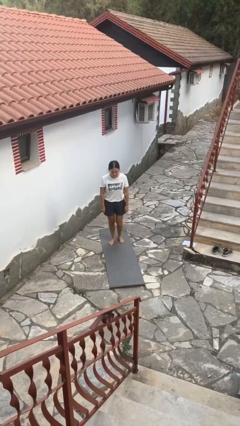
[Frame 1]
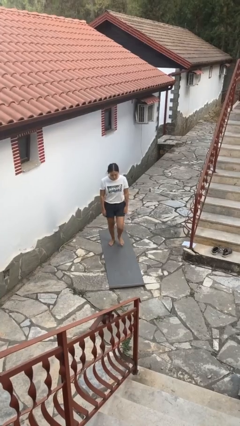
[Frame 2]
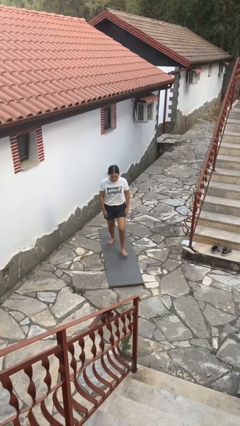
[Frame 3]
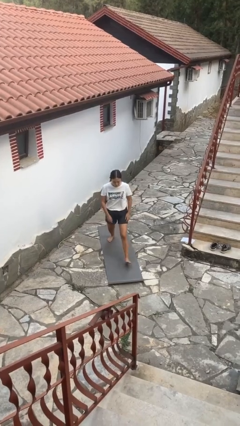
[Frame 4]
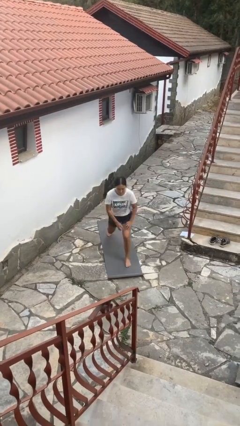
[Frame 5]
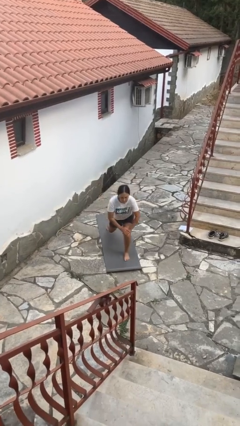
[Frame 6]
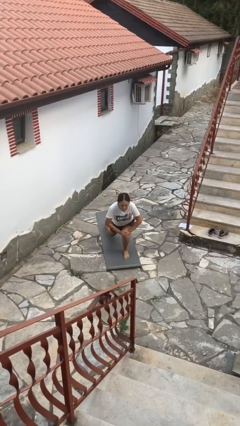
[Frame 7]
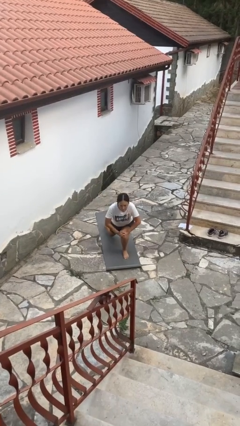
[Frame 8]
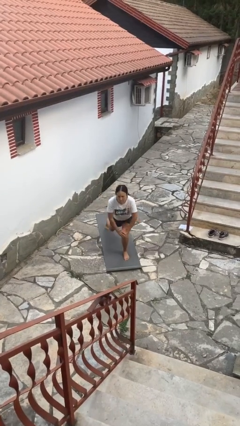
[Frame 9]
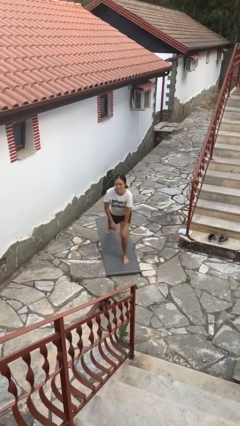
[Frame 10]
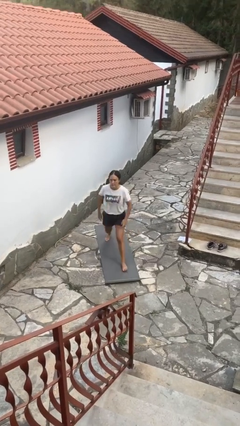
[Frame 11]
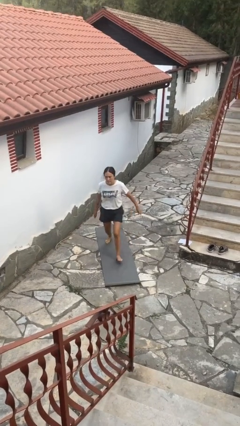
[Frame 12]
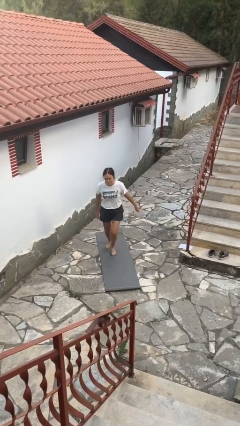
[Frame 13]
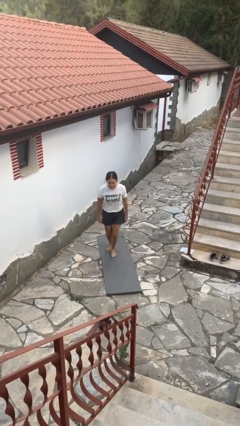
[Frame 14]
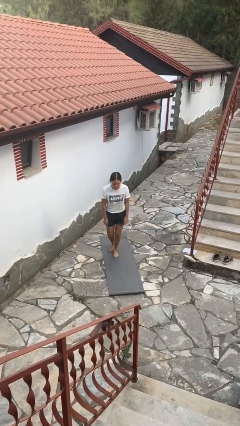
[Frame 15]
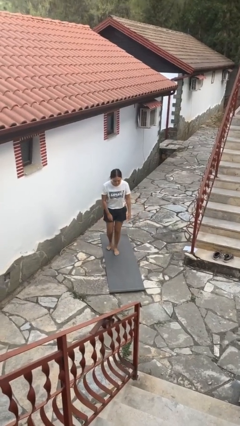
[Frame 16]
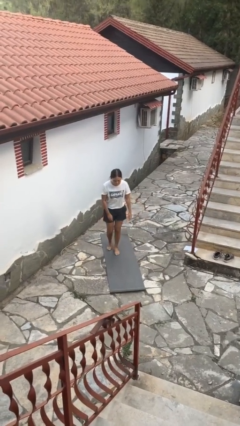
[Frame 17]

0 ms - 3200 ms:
person exercises with lunges

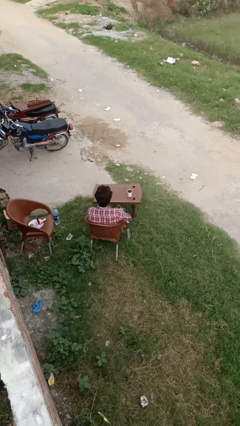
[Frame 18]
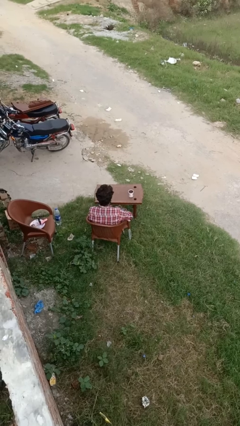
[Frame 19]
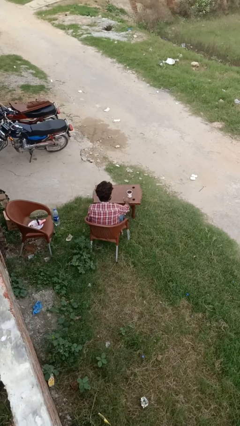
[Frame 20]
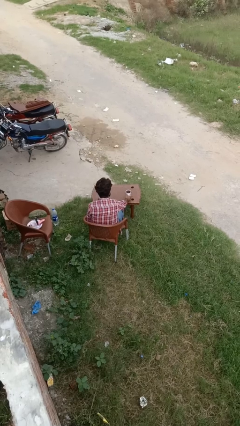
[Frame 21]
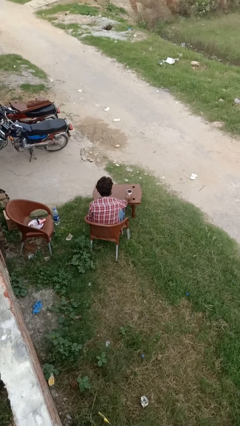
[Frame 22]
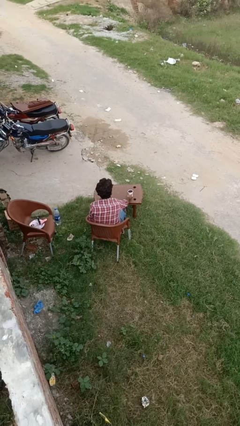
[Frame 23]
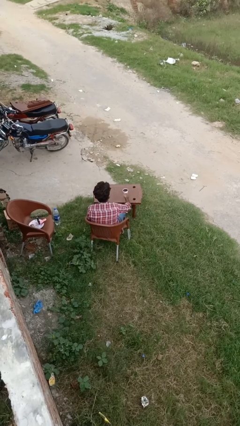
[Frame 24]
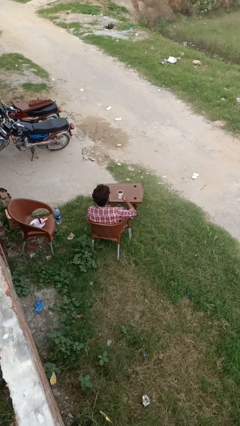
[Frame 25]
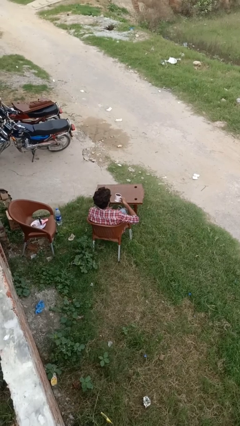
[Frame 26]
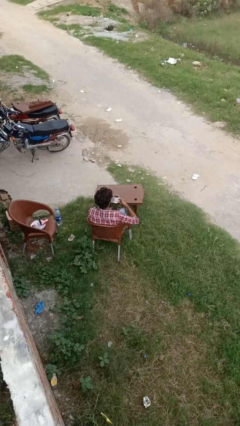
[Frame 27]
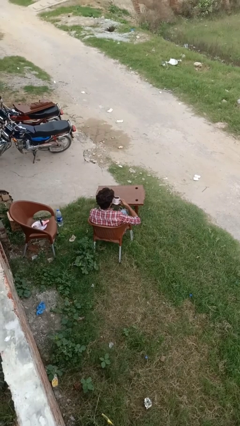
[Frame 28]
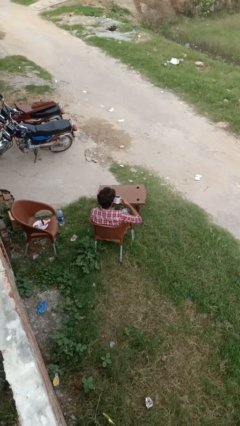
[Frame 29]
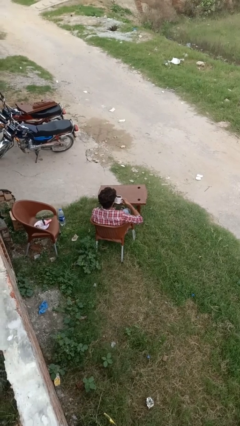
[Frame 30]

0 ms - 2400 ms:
person picks up object from table

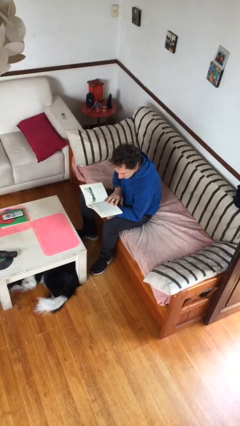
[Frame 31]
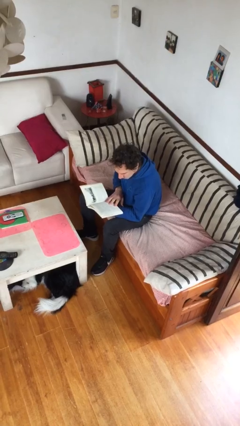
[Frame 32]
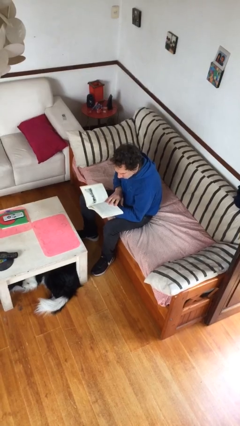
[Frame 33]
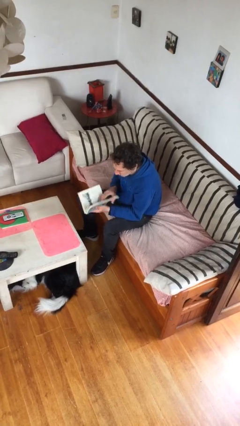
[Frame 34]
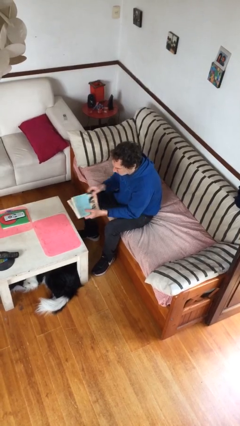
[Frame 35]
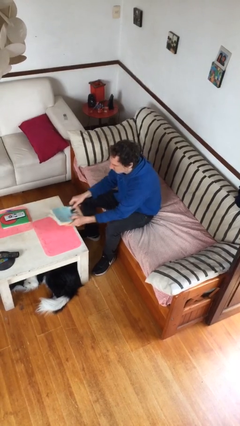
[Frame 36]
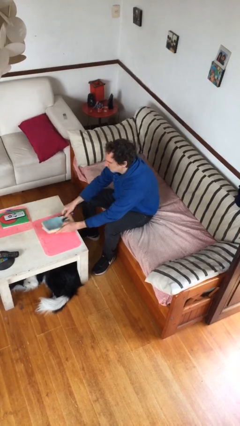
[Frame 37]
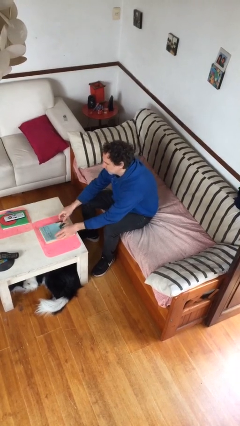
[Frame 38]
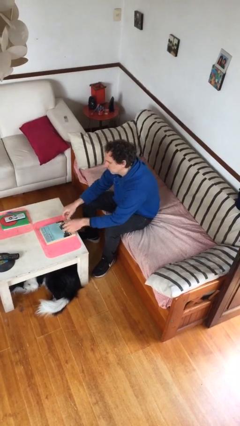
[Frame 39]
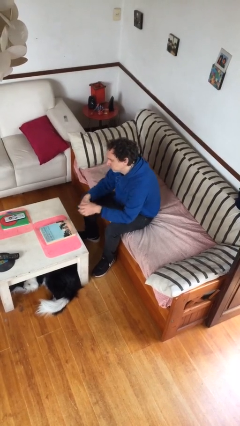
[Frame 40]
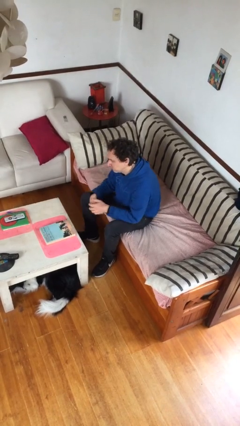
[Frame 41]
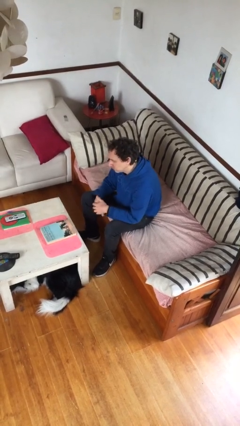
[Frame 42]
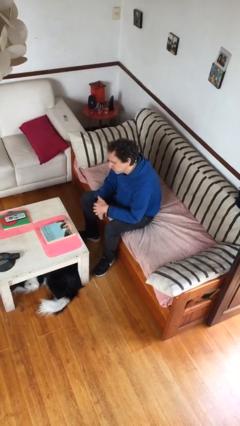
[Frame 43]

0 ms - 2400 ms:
person puts down object on table

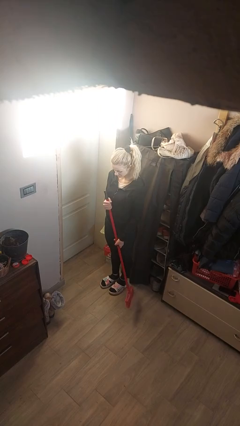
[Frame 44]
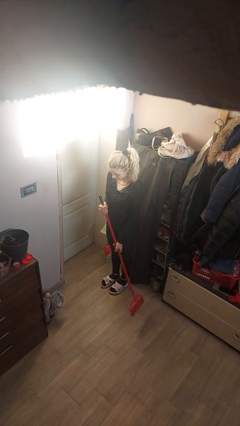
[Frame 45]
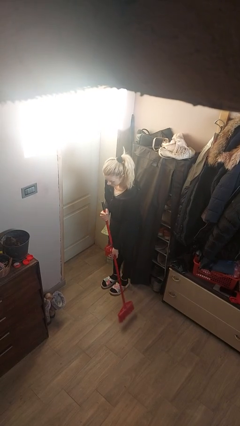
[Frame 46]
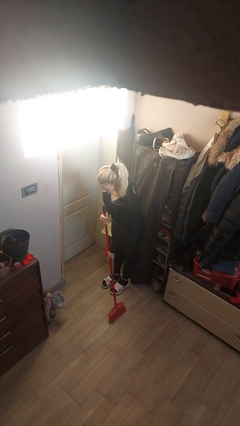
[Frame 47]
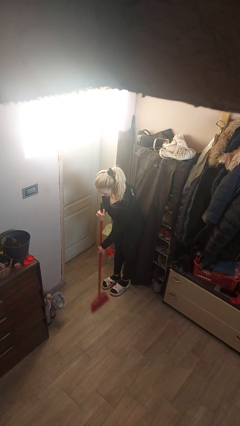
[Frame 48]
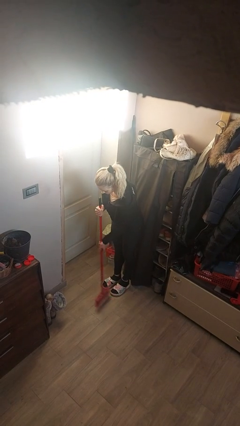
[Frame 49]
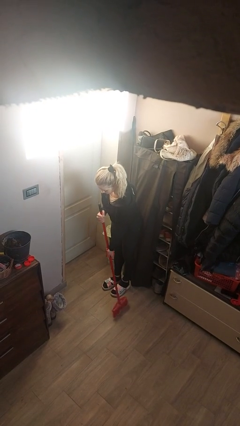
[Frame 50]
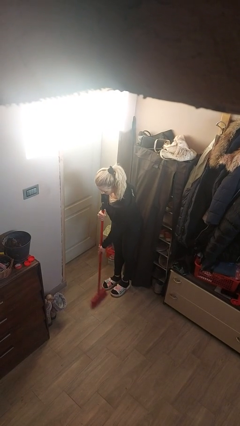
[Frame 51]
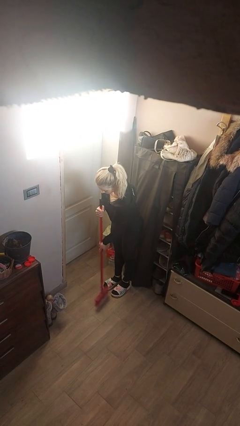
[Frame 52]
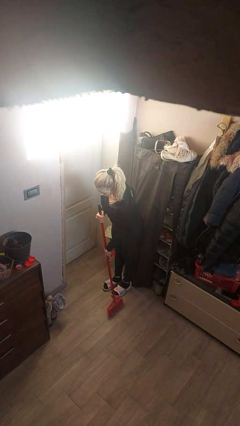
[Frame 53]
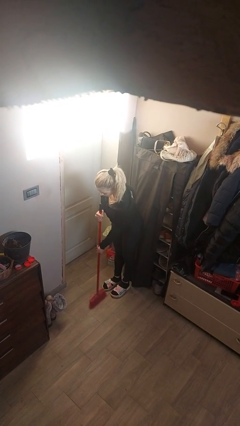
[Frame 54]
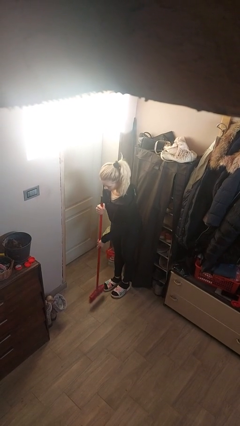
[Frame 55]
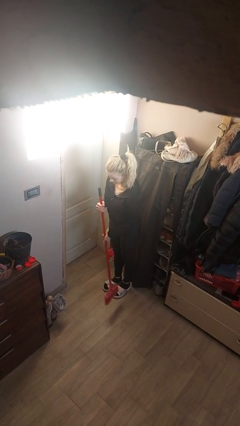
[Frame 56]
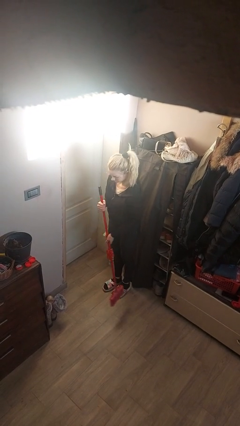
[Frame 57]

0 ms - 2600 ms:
person sweeps floor

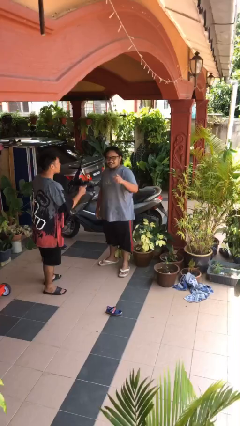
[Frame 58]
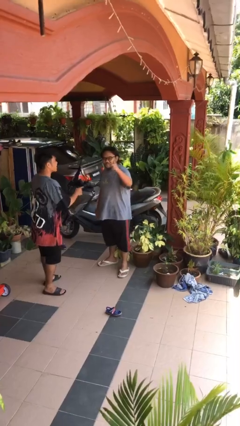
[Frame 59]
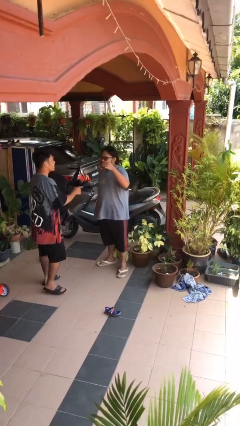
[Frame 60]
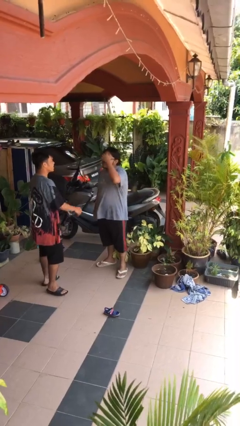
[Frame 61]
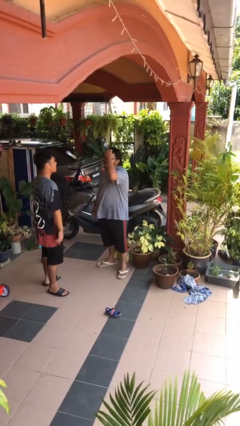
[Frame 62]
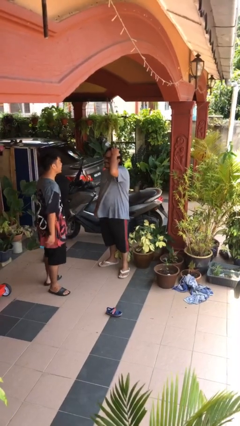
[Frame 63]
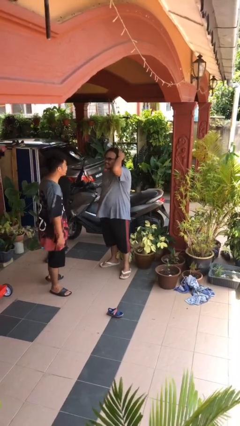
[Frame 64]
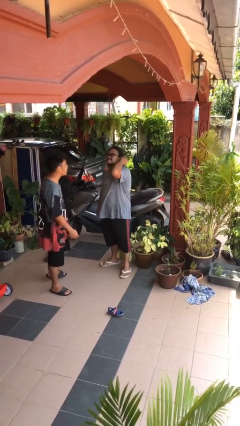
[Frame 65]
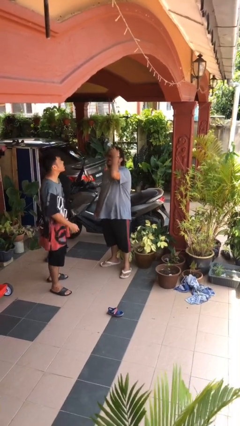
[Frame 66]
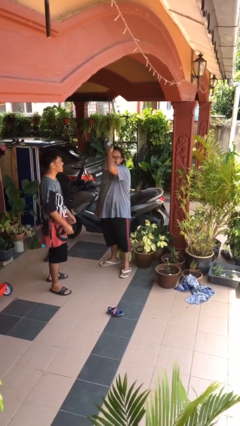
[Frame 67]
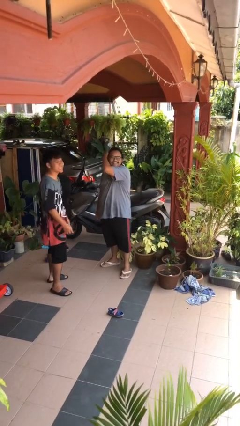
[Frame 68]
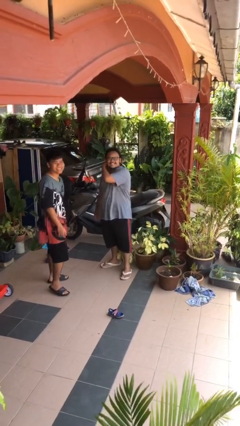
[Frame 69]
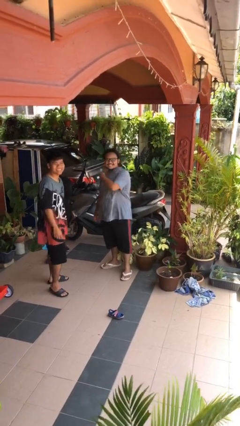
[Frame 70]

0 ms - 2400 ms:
person talks to person

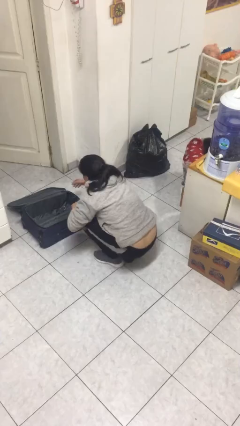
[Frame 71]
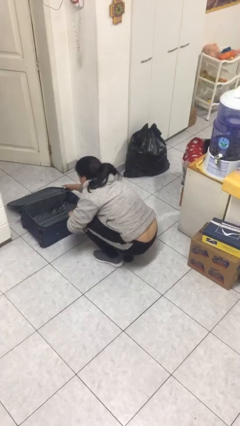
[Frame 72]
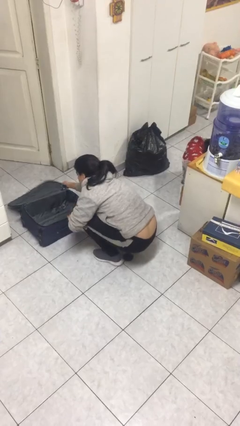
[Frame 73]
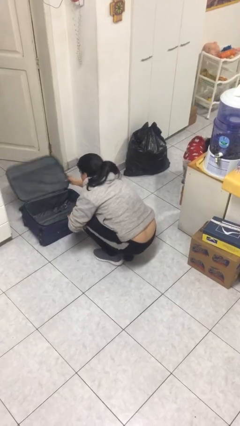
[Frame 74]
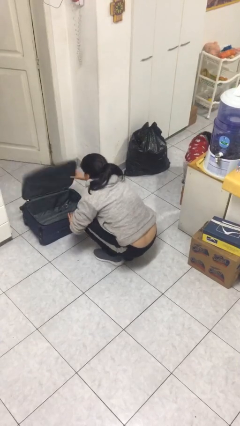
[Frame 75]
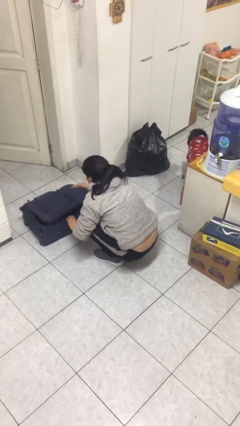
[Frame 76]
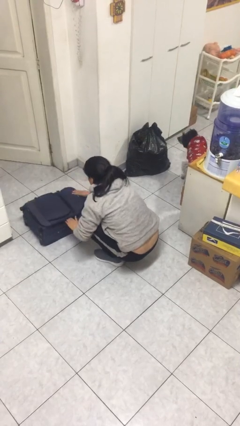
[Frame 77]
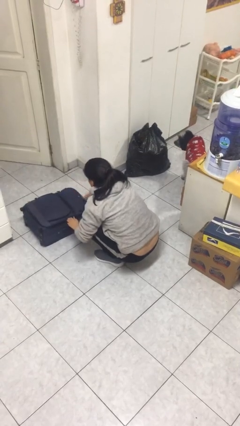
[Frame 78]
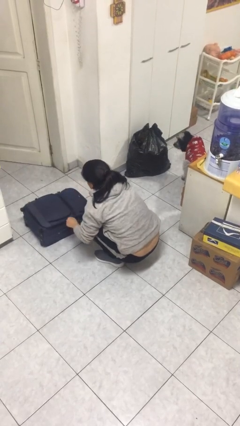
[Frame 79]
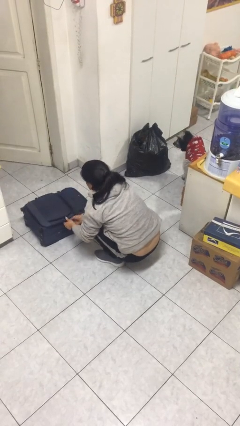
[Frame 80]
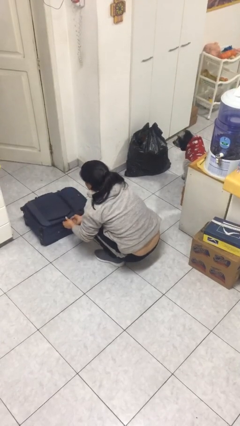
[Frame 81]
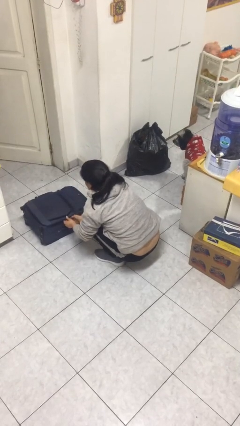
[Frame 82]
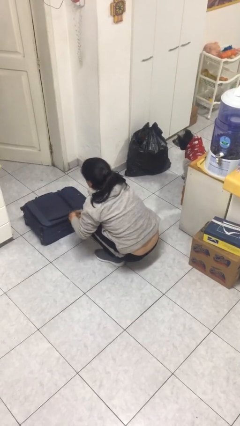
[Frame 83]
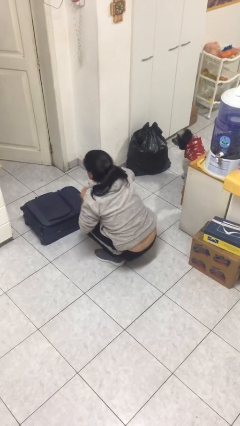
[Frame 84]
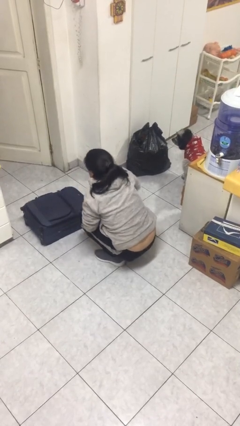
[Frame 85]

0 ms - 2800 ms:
person closes suitcase

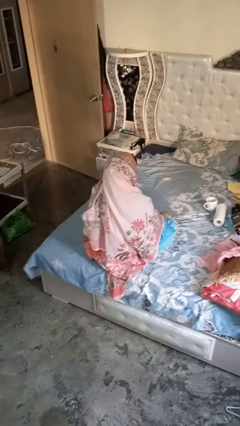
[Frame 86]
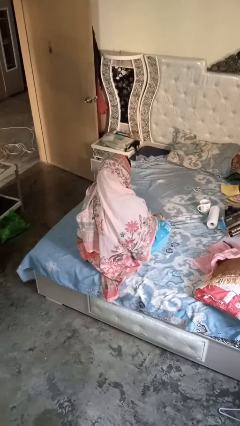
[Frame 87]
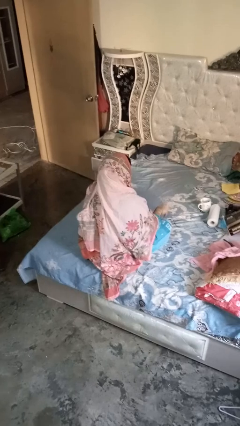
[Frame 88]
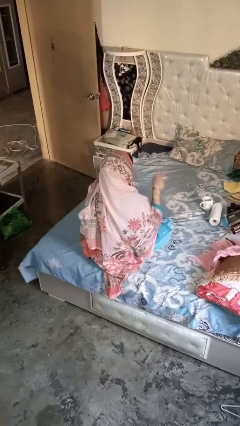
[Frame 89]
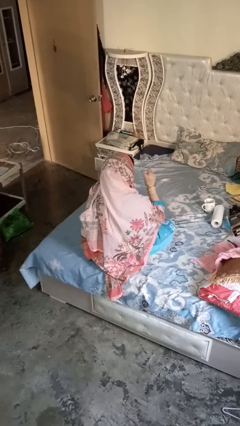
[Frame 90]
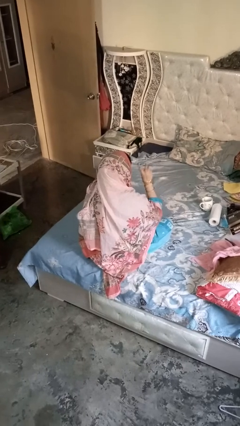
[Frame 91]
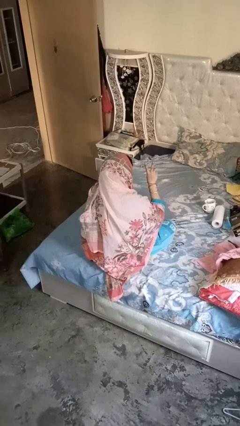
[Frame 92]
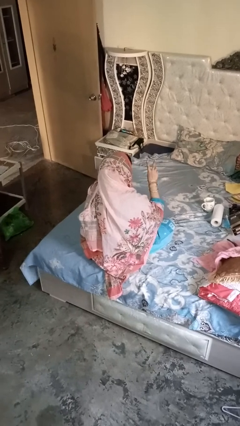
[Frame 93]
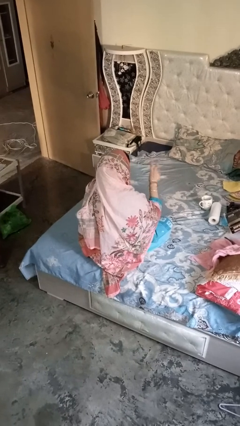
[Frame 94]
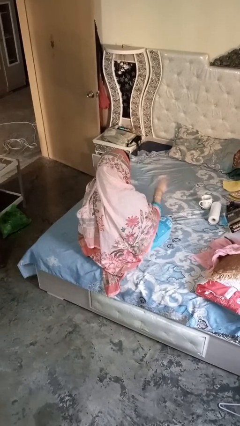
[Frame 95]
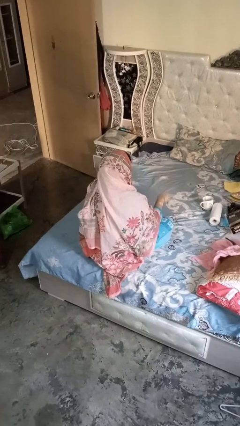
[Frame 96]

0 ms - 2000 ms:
person gestures be quiet
